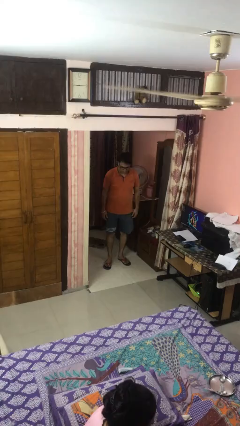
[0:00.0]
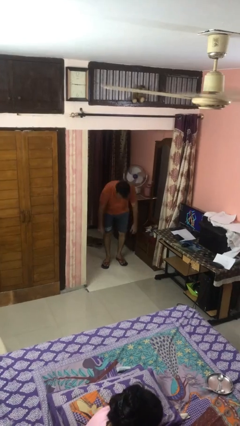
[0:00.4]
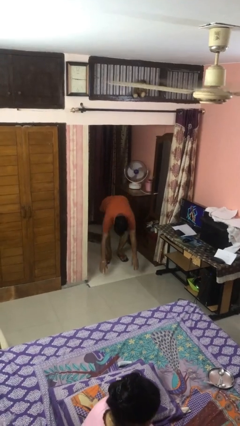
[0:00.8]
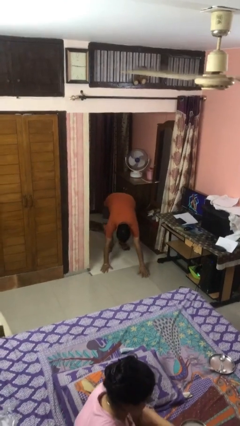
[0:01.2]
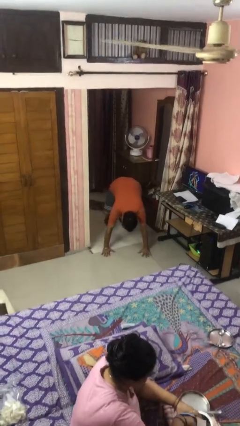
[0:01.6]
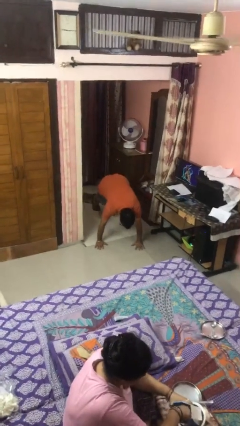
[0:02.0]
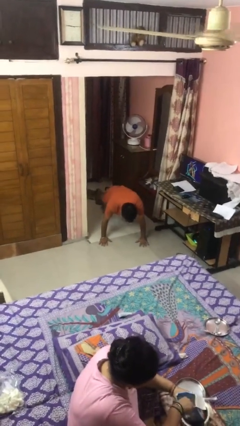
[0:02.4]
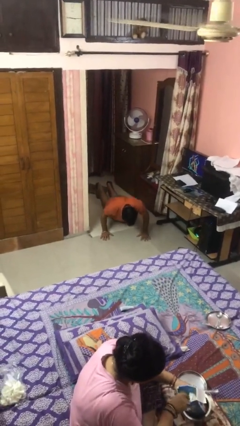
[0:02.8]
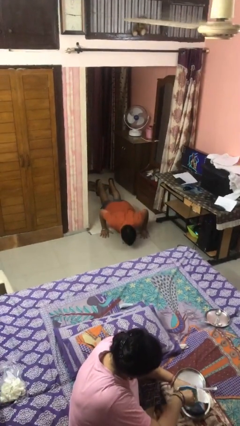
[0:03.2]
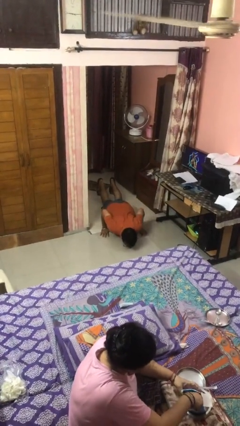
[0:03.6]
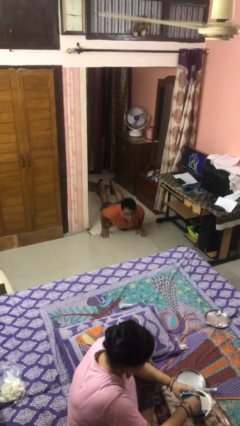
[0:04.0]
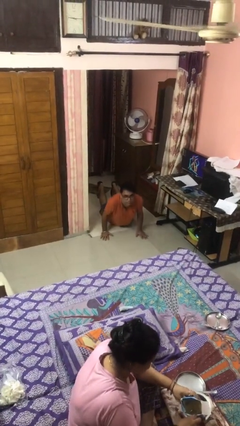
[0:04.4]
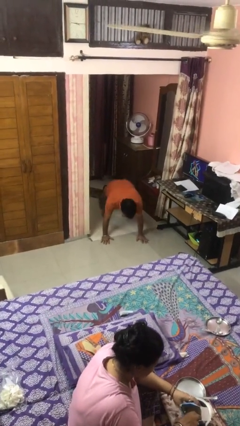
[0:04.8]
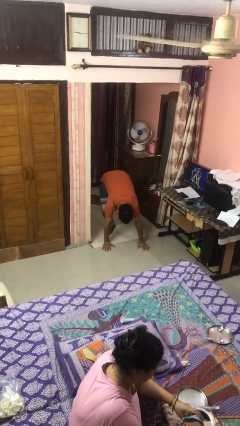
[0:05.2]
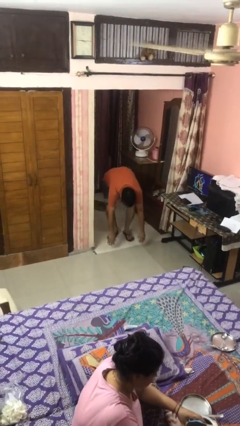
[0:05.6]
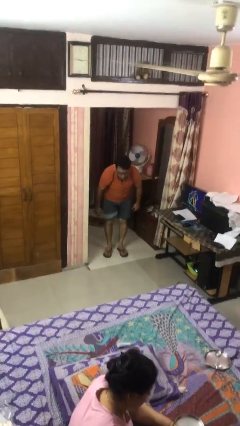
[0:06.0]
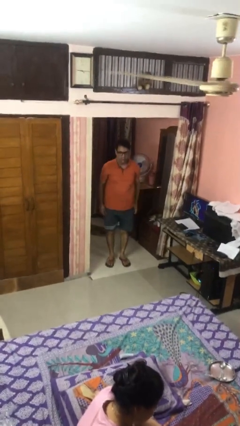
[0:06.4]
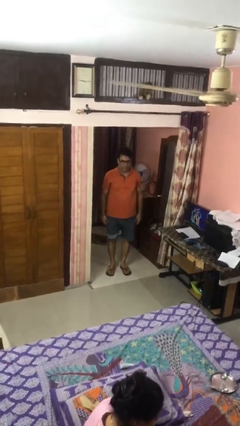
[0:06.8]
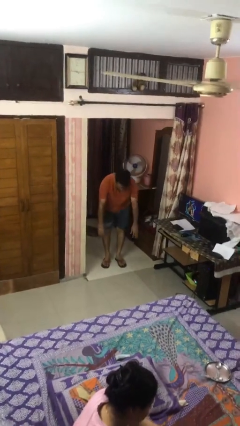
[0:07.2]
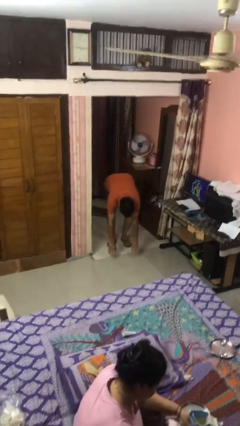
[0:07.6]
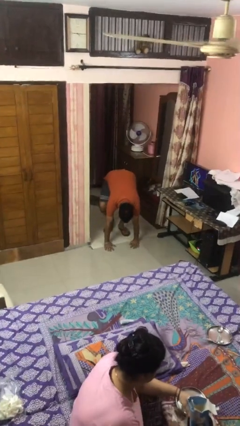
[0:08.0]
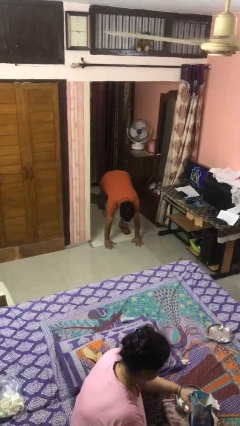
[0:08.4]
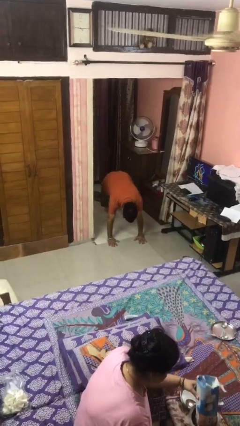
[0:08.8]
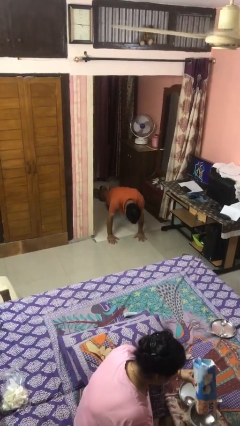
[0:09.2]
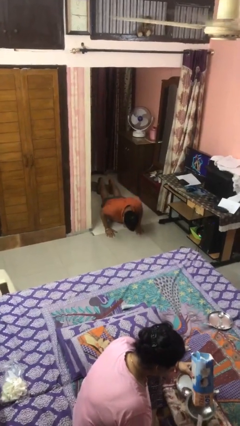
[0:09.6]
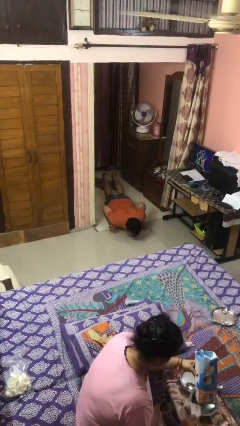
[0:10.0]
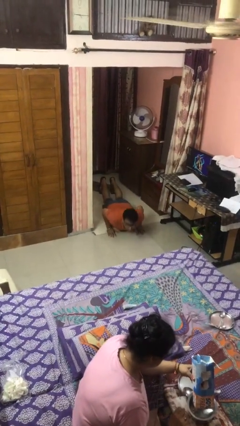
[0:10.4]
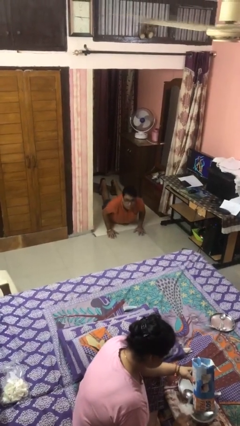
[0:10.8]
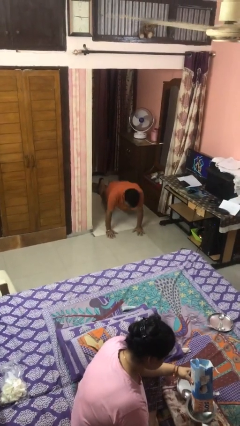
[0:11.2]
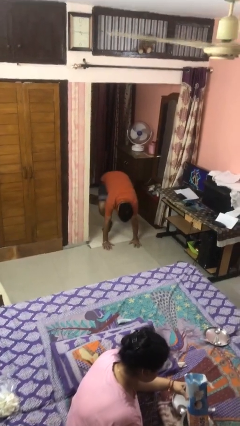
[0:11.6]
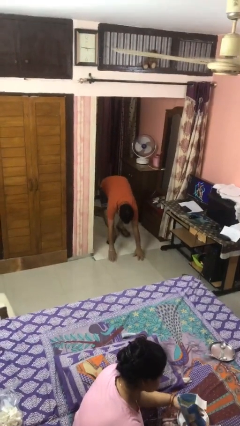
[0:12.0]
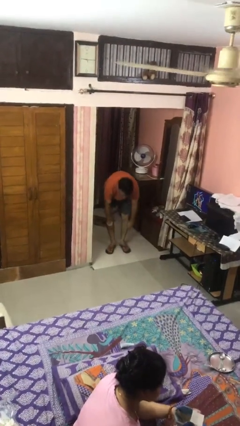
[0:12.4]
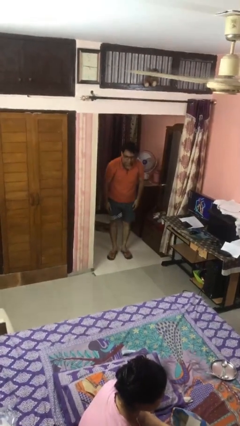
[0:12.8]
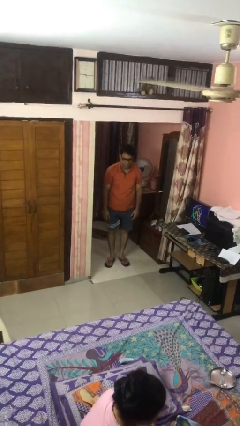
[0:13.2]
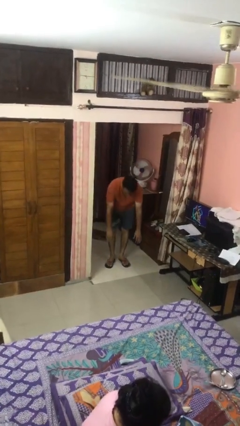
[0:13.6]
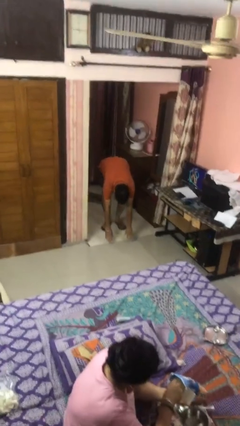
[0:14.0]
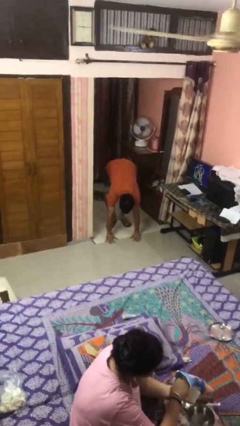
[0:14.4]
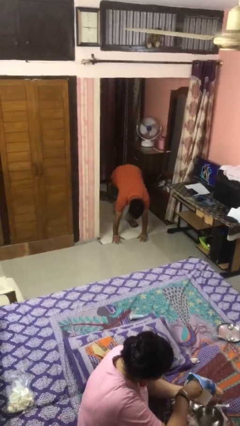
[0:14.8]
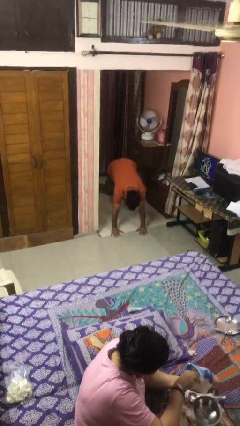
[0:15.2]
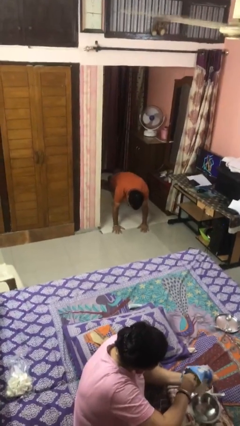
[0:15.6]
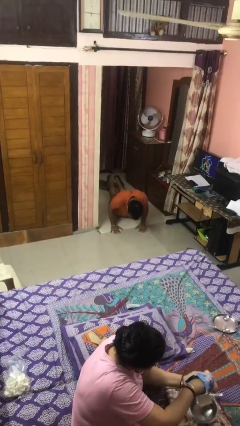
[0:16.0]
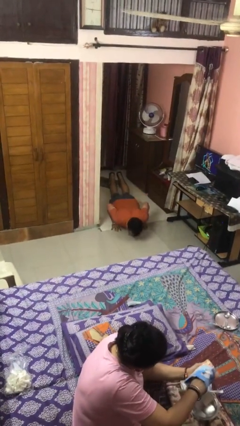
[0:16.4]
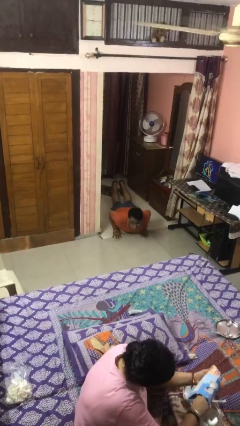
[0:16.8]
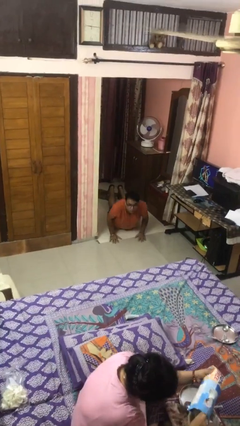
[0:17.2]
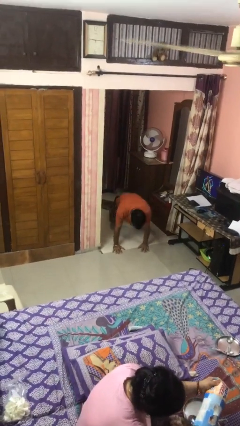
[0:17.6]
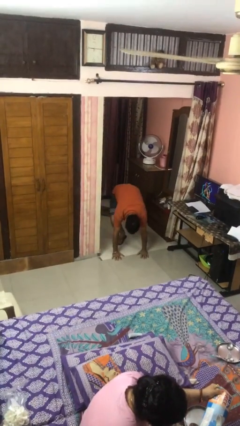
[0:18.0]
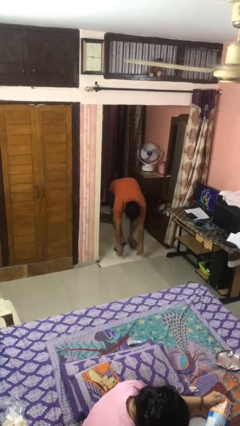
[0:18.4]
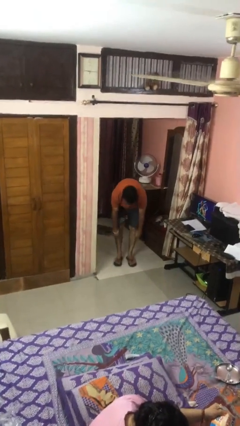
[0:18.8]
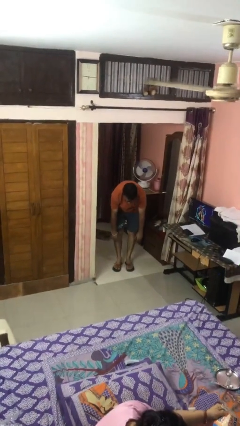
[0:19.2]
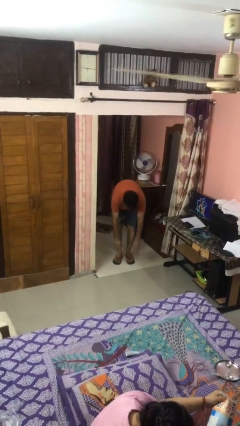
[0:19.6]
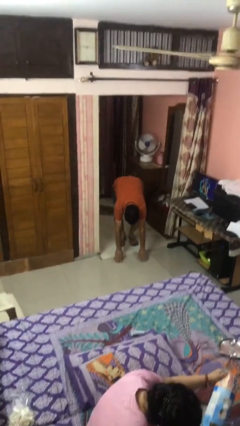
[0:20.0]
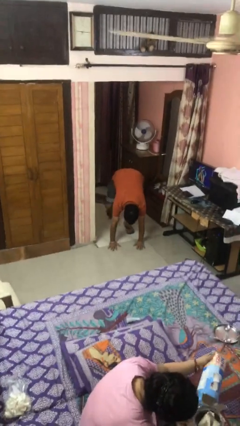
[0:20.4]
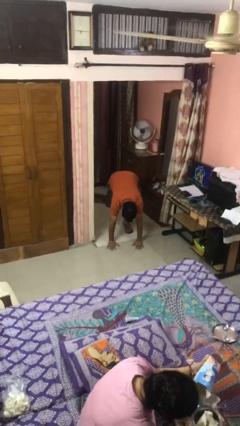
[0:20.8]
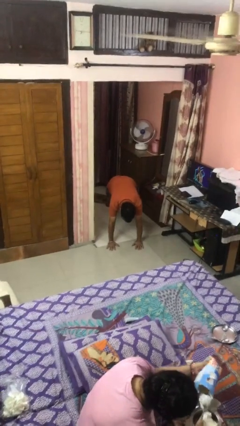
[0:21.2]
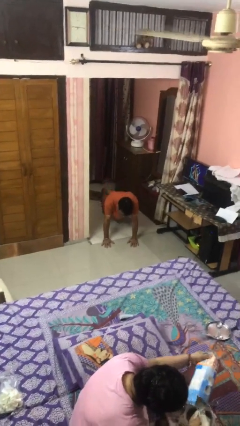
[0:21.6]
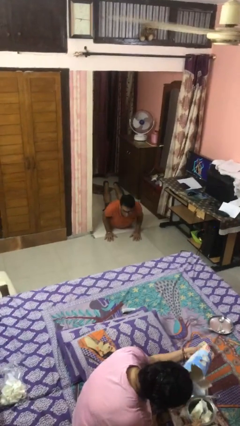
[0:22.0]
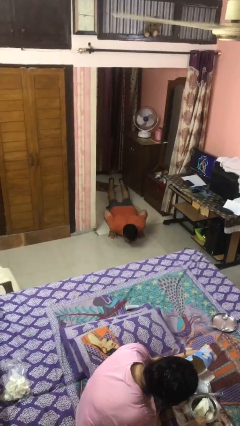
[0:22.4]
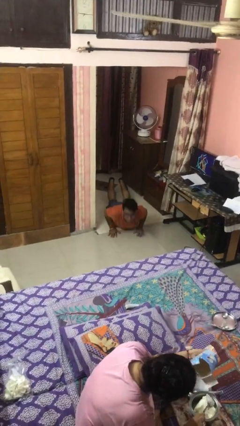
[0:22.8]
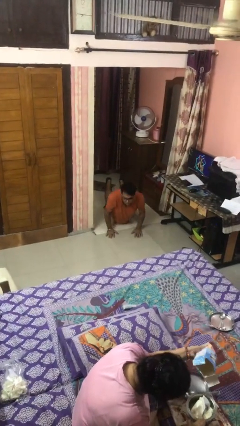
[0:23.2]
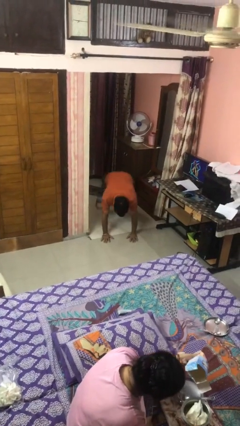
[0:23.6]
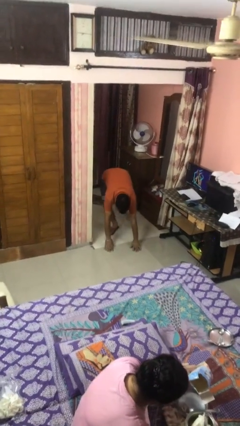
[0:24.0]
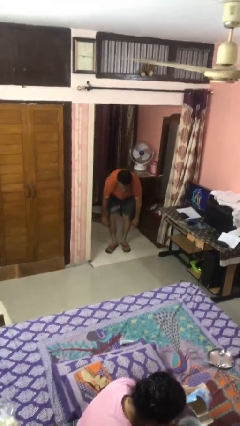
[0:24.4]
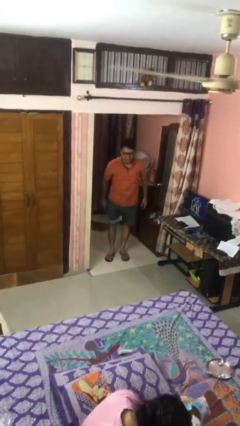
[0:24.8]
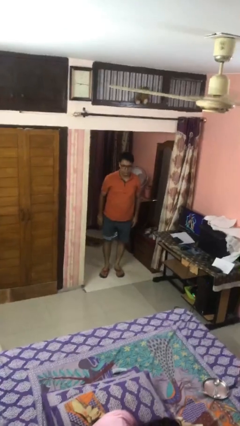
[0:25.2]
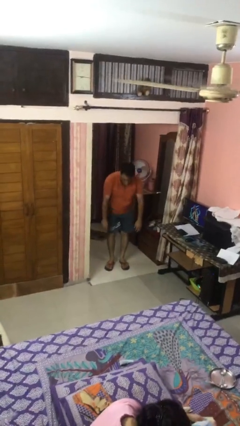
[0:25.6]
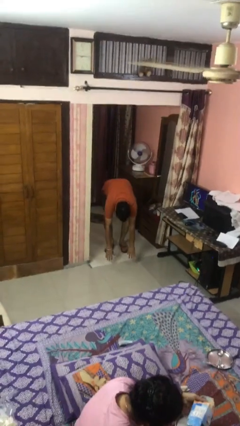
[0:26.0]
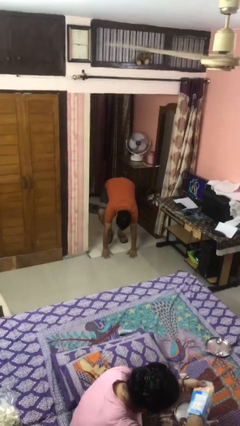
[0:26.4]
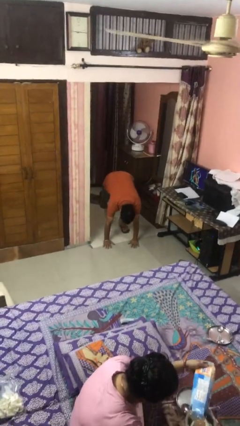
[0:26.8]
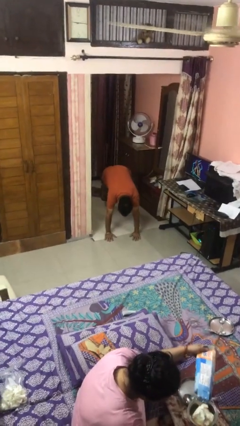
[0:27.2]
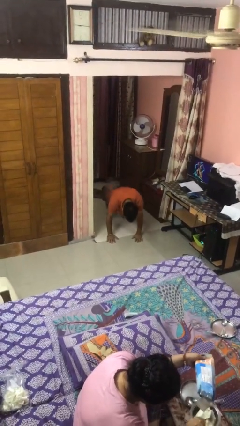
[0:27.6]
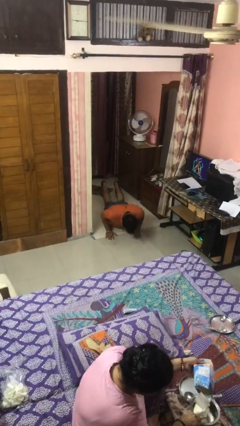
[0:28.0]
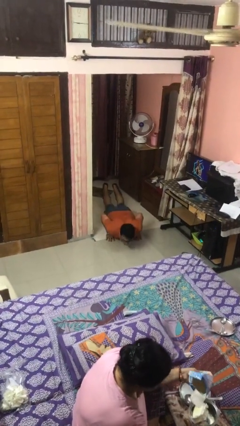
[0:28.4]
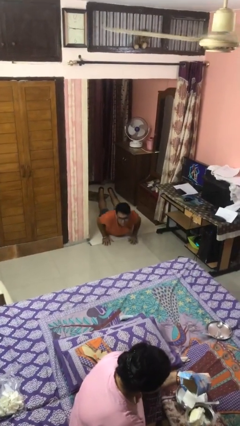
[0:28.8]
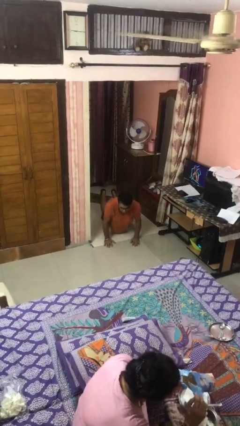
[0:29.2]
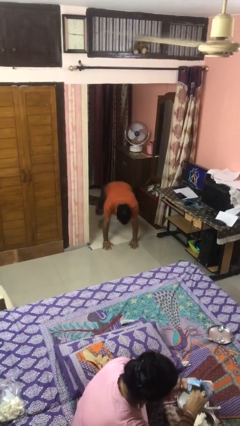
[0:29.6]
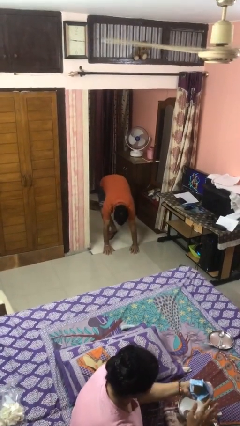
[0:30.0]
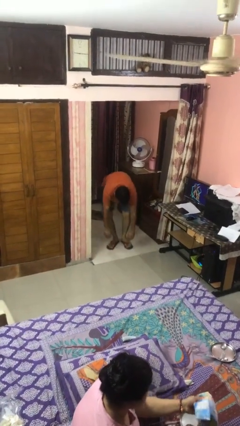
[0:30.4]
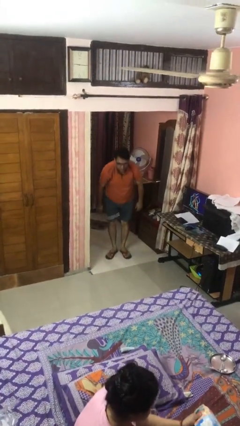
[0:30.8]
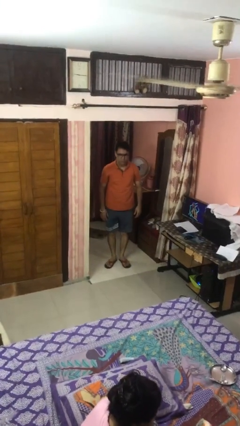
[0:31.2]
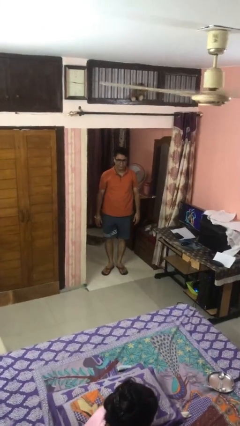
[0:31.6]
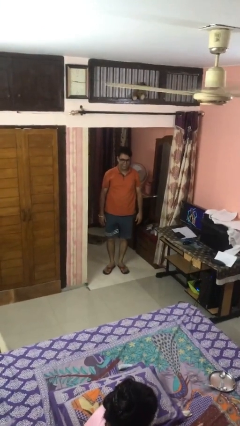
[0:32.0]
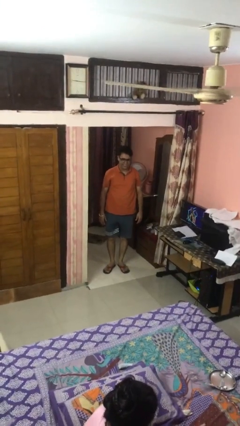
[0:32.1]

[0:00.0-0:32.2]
person exercises with pushup

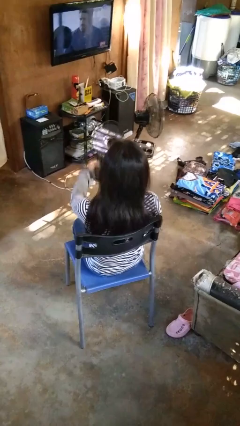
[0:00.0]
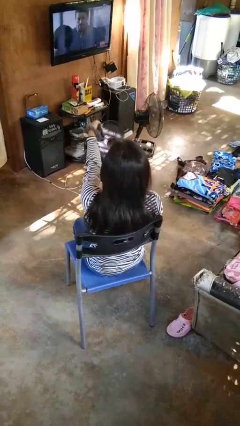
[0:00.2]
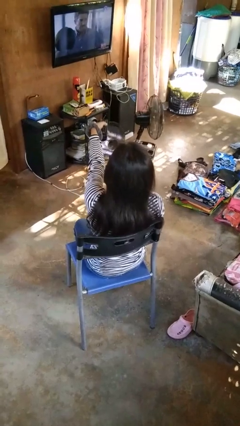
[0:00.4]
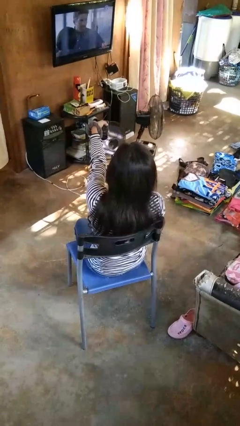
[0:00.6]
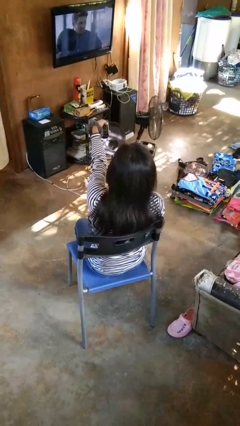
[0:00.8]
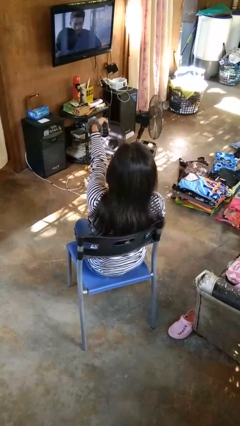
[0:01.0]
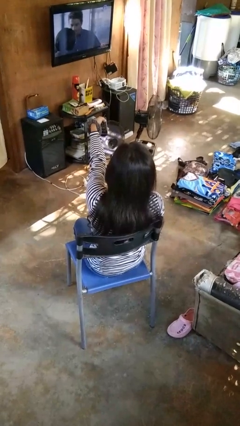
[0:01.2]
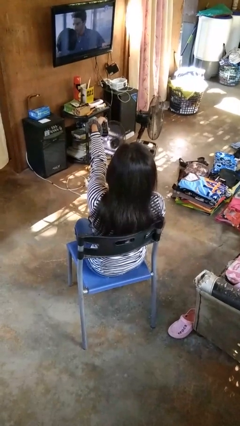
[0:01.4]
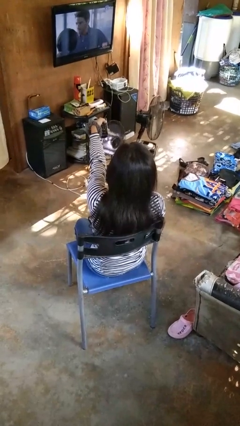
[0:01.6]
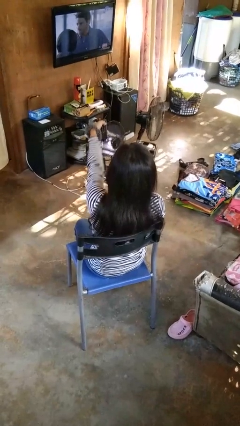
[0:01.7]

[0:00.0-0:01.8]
person uses television remote

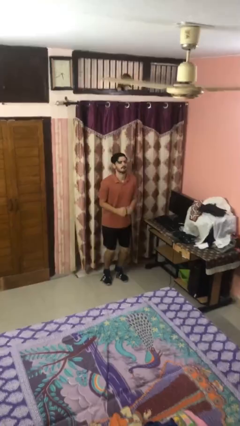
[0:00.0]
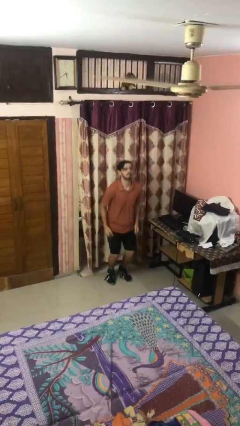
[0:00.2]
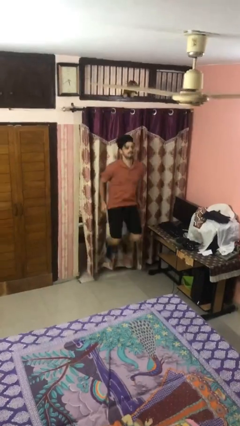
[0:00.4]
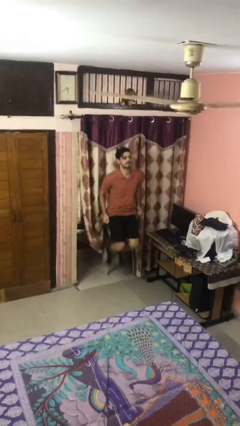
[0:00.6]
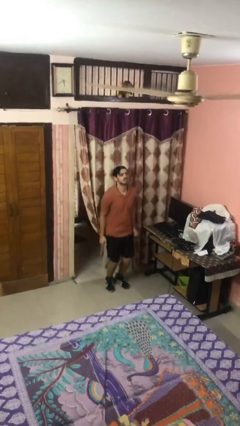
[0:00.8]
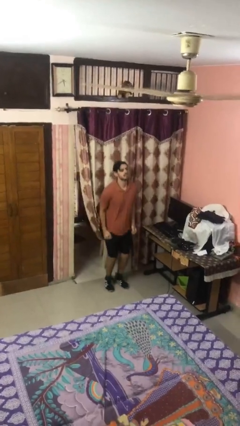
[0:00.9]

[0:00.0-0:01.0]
person jumps
